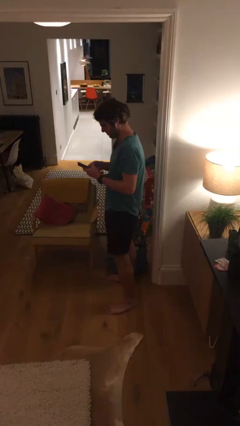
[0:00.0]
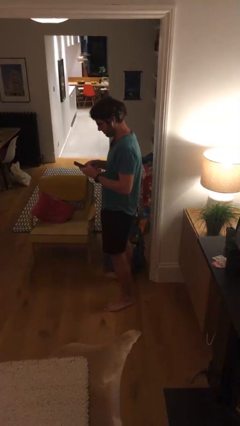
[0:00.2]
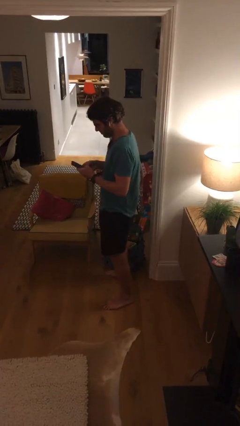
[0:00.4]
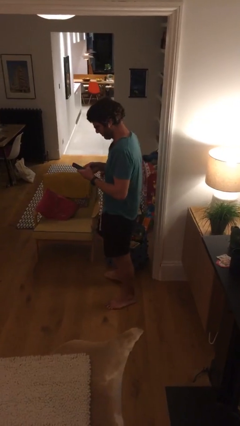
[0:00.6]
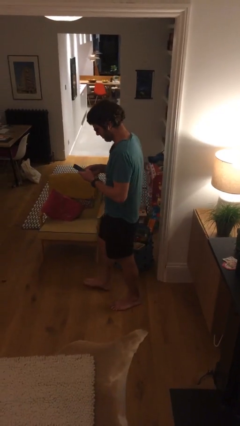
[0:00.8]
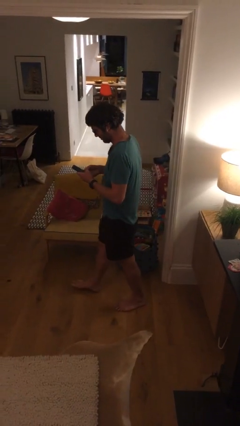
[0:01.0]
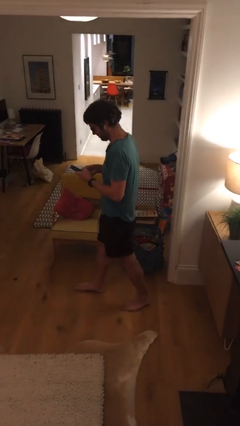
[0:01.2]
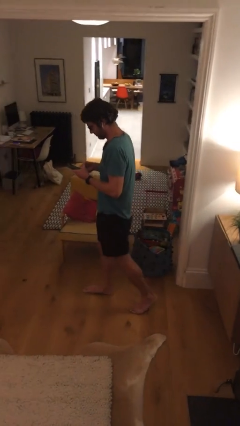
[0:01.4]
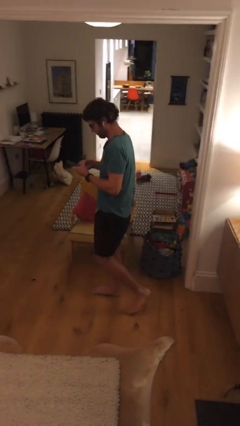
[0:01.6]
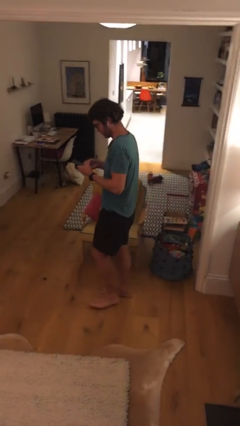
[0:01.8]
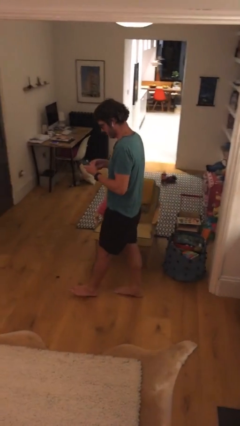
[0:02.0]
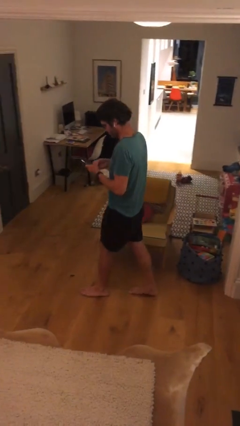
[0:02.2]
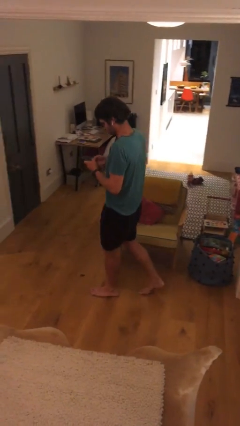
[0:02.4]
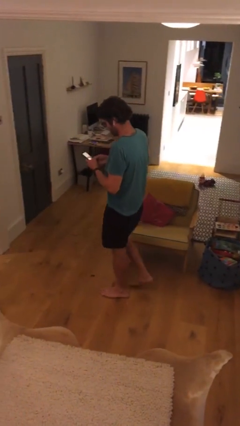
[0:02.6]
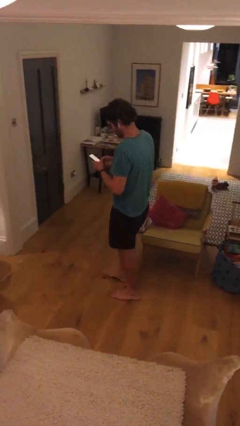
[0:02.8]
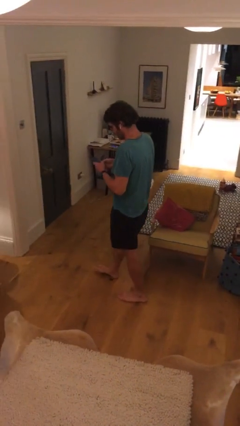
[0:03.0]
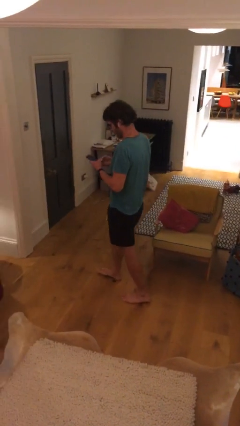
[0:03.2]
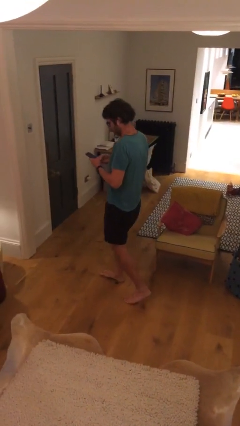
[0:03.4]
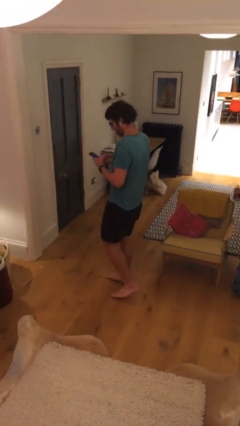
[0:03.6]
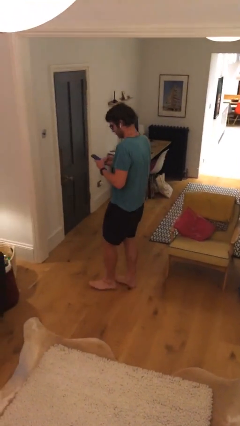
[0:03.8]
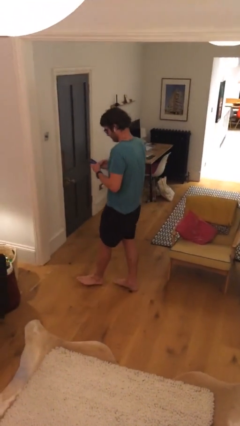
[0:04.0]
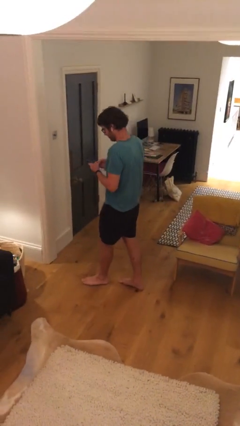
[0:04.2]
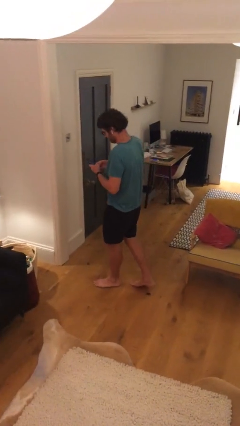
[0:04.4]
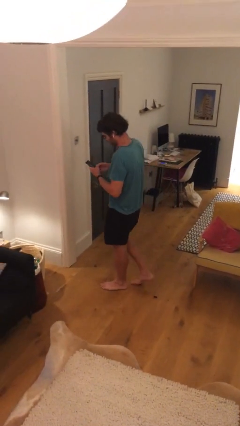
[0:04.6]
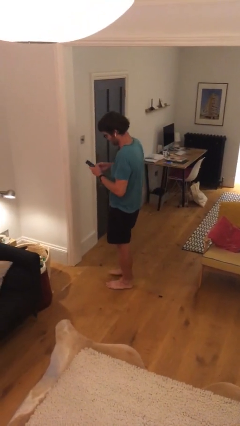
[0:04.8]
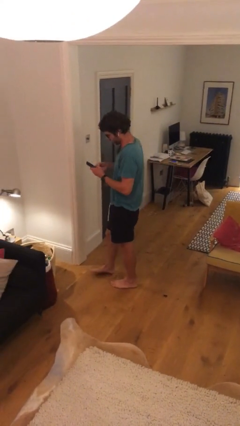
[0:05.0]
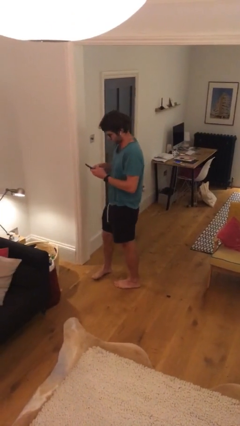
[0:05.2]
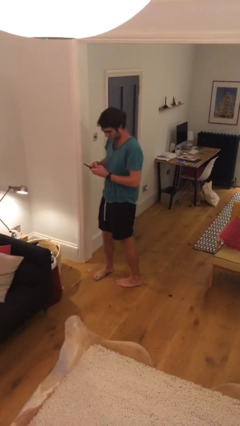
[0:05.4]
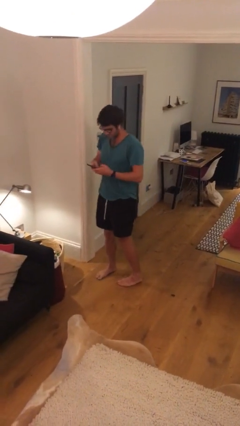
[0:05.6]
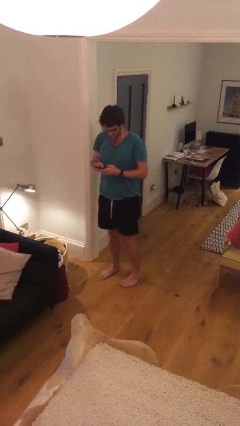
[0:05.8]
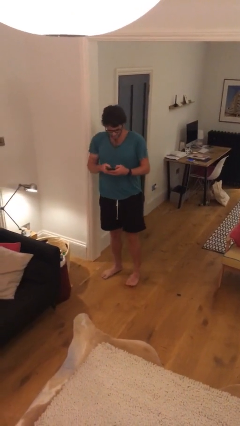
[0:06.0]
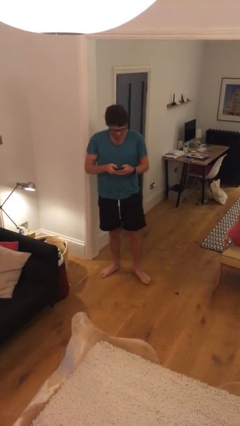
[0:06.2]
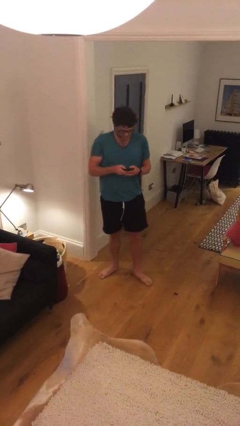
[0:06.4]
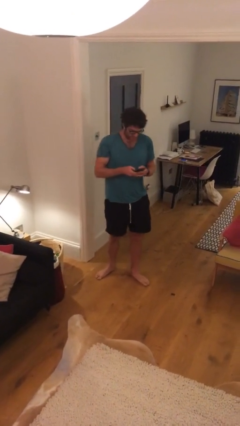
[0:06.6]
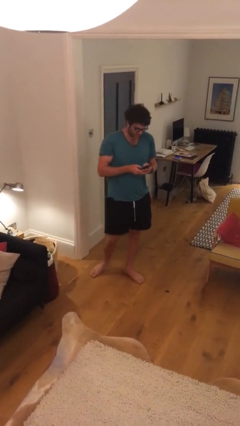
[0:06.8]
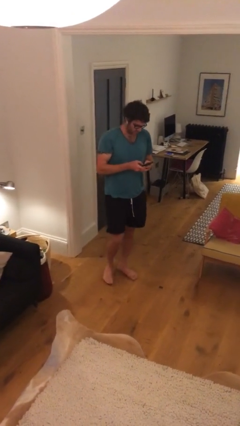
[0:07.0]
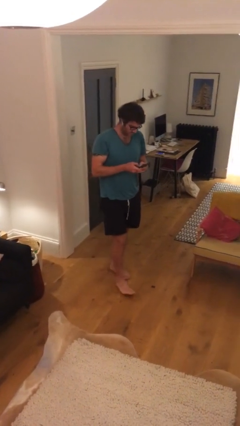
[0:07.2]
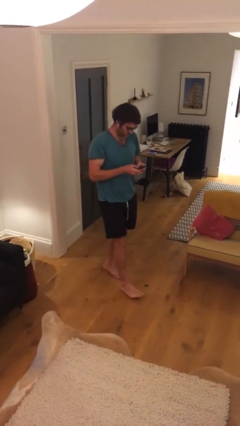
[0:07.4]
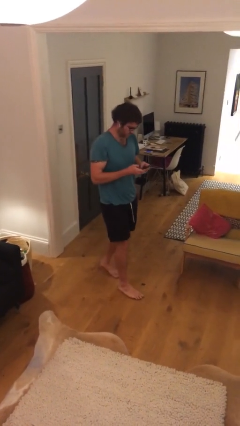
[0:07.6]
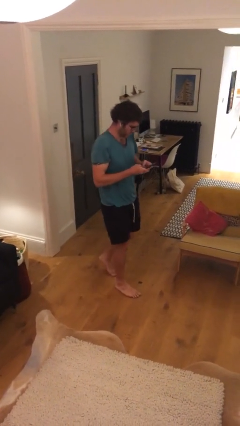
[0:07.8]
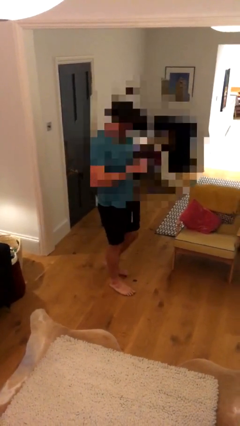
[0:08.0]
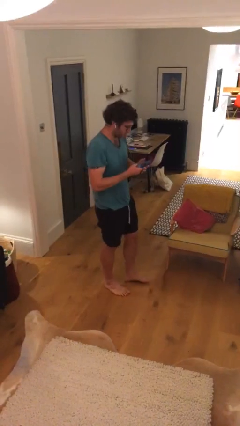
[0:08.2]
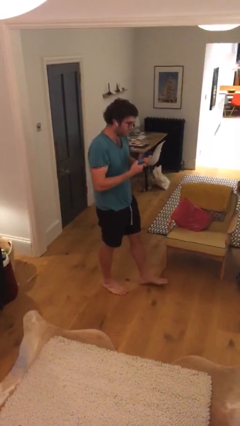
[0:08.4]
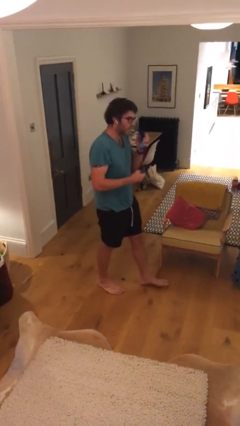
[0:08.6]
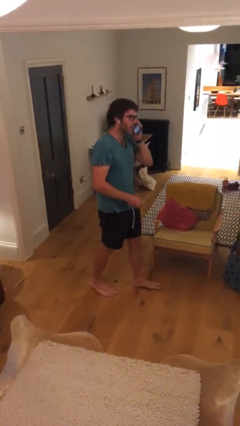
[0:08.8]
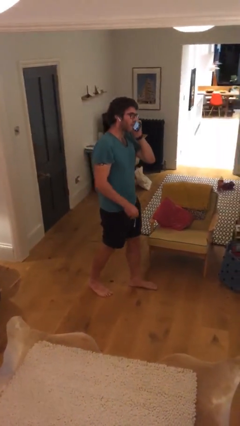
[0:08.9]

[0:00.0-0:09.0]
person texts on phone

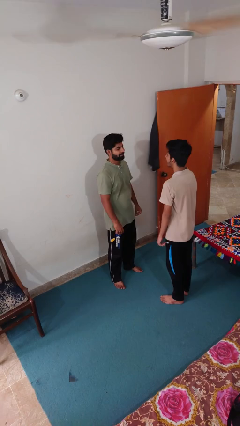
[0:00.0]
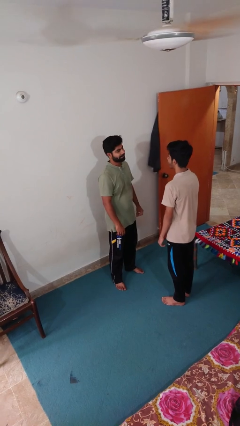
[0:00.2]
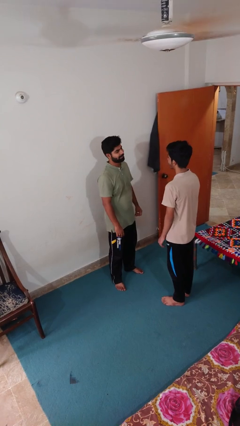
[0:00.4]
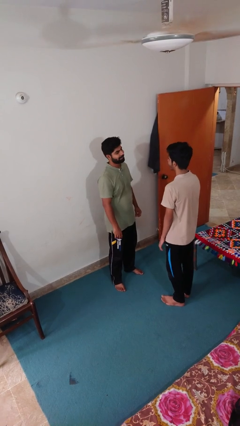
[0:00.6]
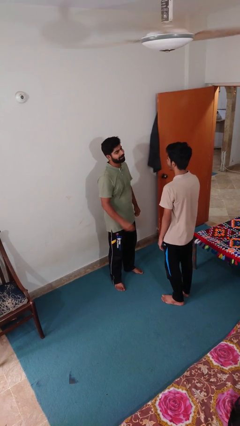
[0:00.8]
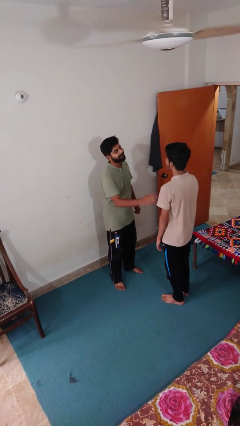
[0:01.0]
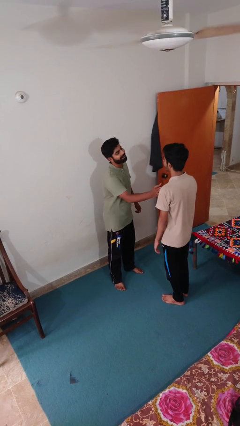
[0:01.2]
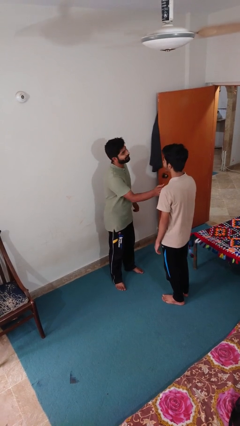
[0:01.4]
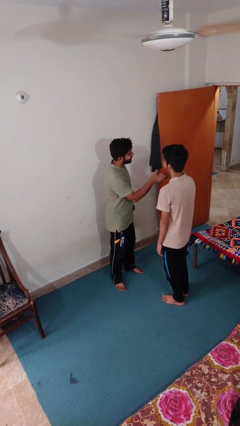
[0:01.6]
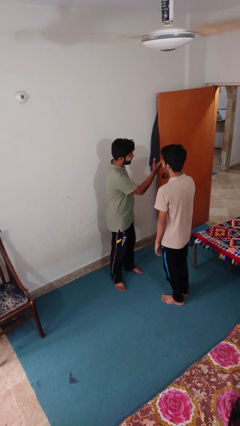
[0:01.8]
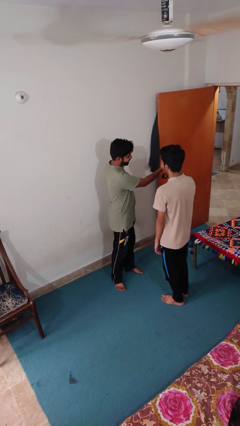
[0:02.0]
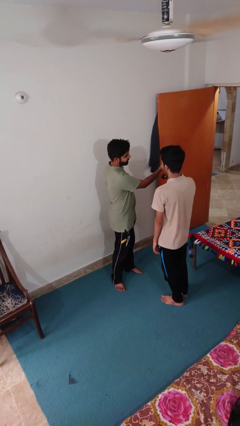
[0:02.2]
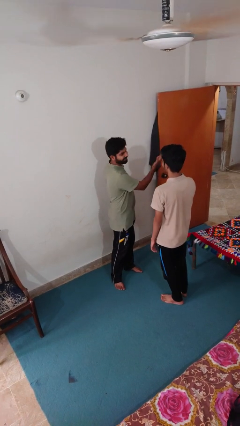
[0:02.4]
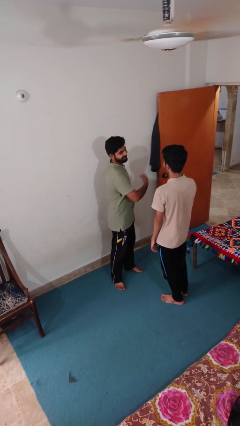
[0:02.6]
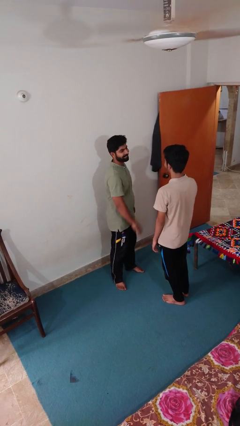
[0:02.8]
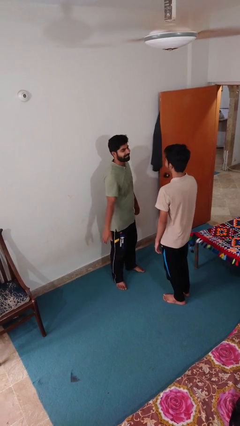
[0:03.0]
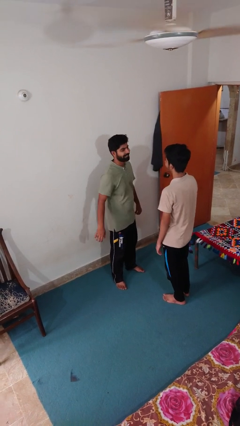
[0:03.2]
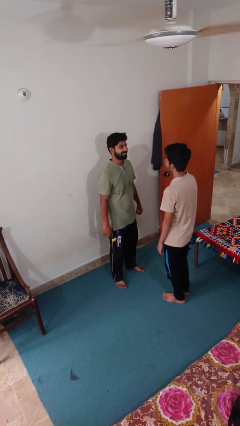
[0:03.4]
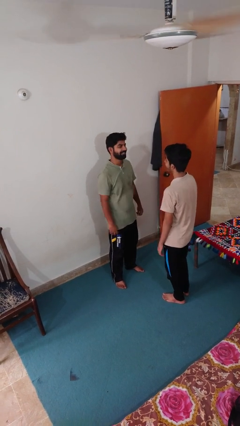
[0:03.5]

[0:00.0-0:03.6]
person shoves person

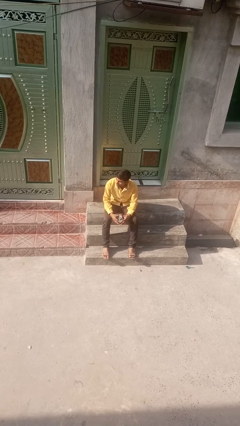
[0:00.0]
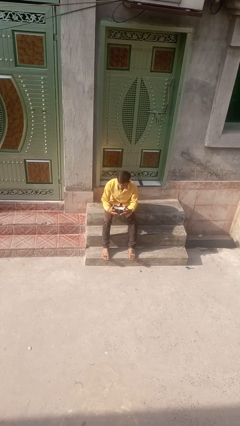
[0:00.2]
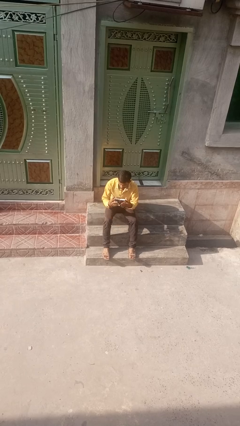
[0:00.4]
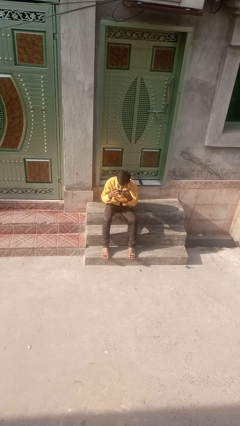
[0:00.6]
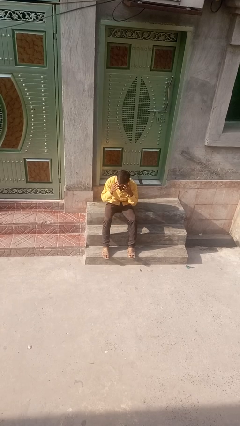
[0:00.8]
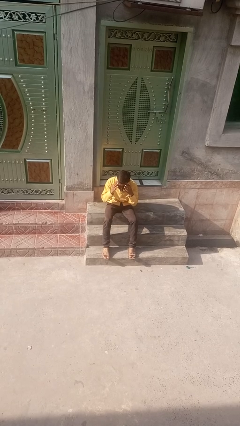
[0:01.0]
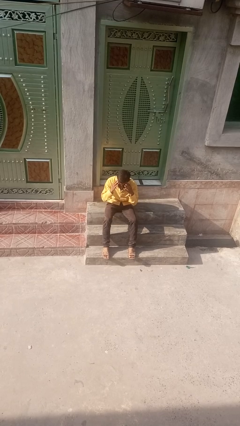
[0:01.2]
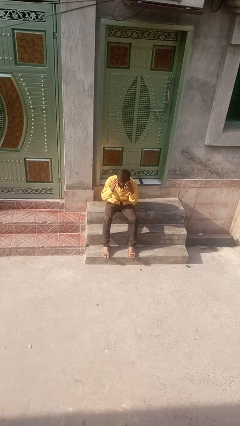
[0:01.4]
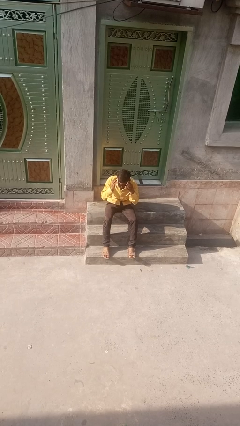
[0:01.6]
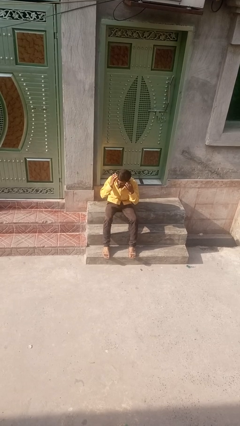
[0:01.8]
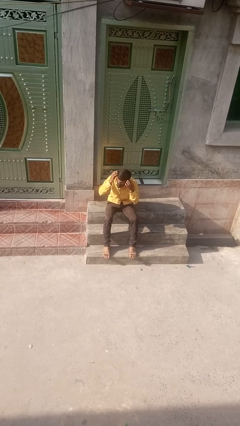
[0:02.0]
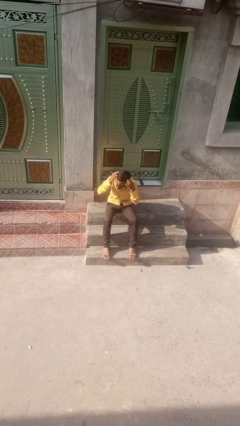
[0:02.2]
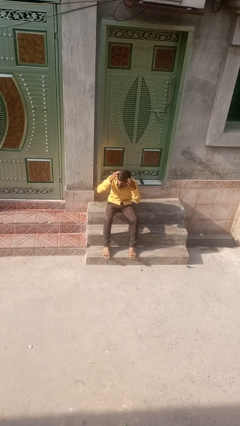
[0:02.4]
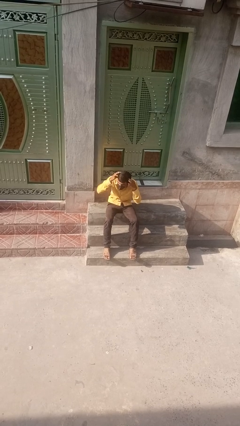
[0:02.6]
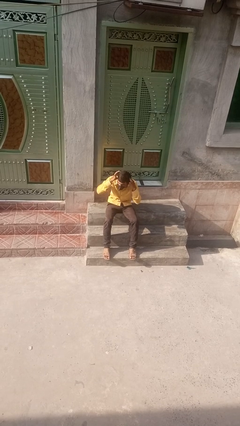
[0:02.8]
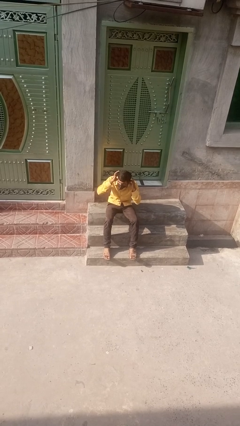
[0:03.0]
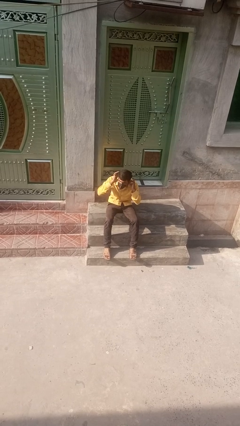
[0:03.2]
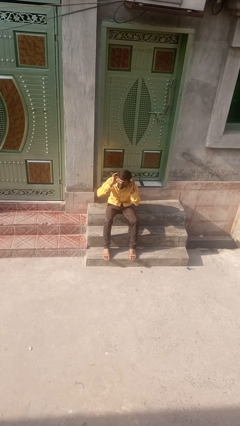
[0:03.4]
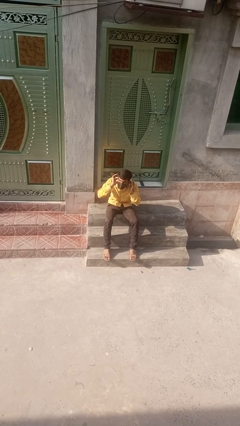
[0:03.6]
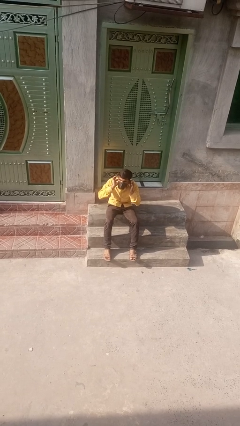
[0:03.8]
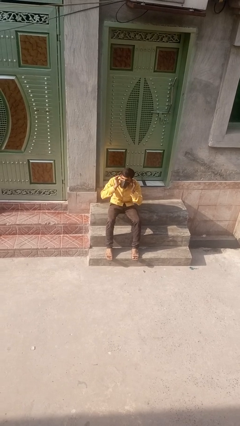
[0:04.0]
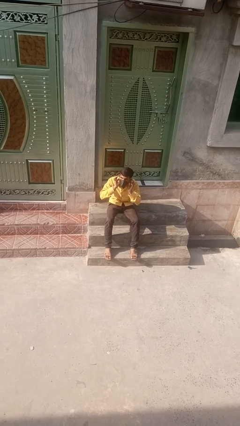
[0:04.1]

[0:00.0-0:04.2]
person puts on facemask

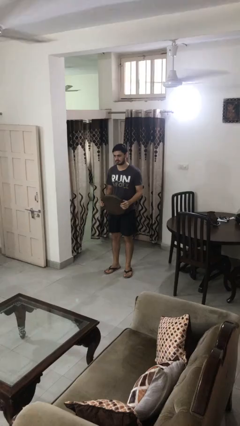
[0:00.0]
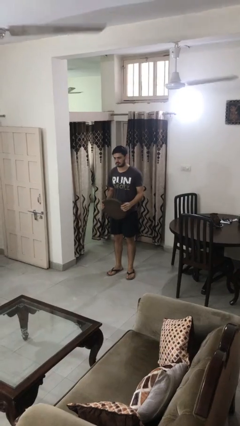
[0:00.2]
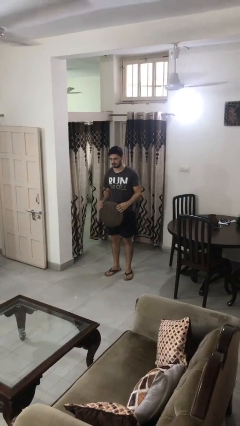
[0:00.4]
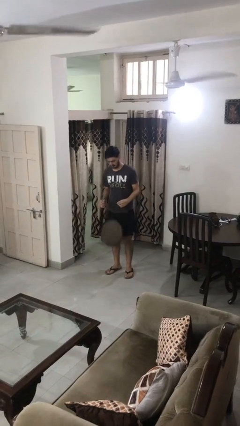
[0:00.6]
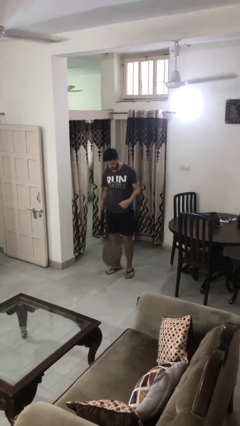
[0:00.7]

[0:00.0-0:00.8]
person drops object
